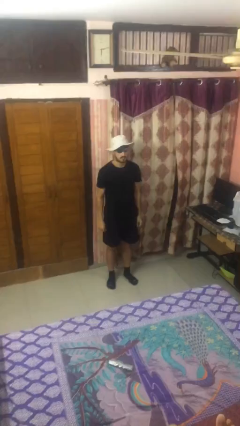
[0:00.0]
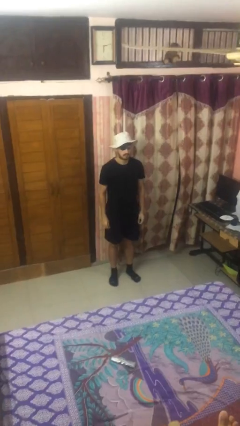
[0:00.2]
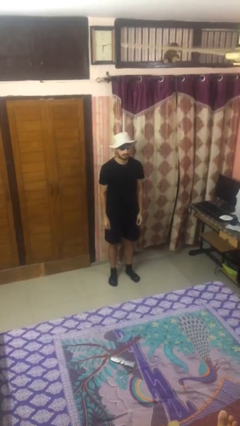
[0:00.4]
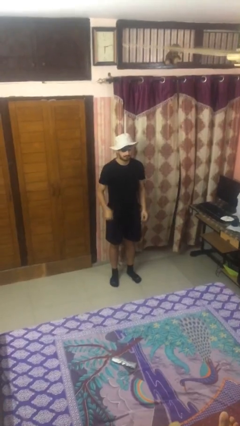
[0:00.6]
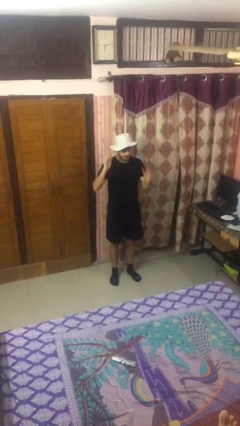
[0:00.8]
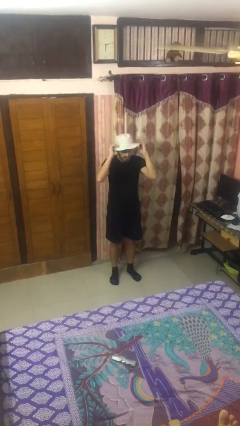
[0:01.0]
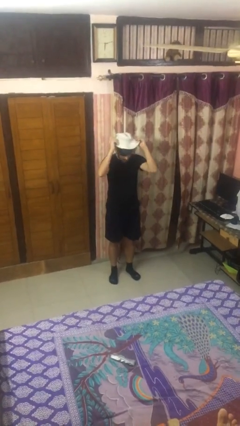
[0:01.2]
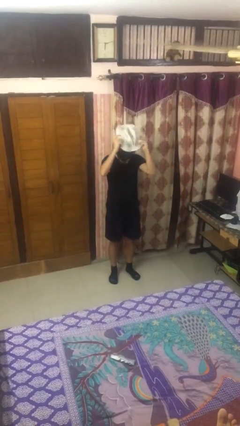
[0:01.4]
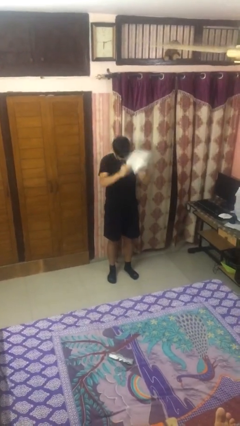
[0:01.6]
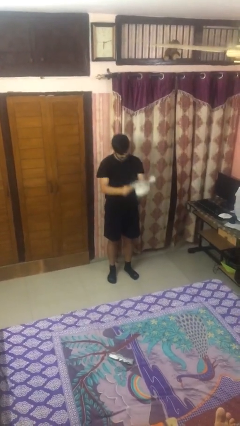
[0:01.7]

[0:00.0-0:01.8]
person takes off hat

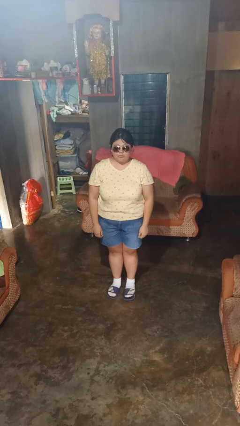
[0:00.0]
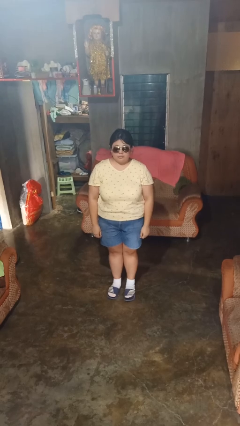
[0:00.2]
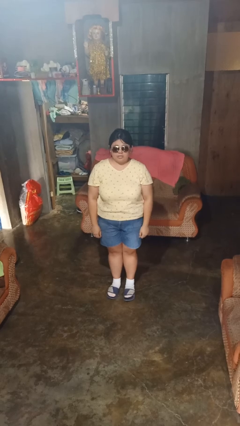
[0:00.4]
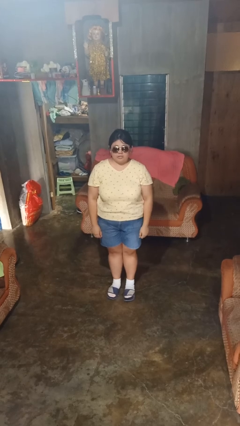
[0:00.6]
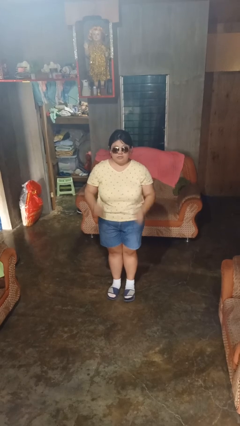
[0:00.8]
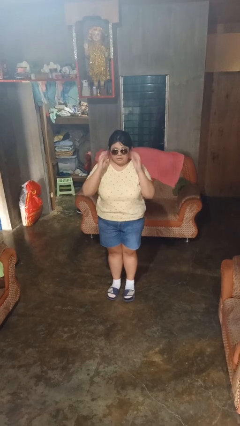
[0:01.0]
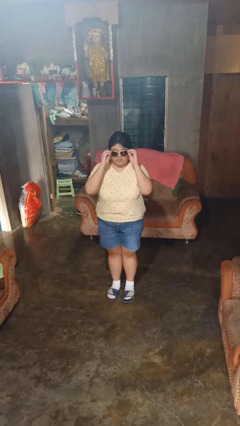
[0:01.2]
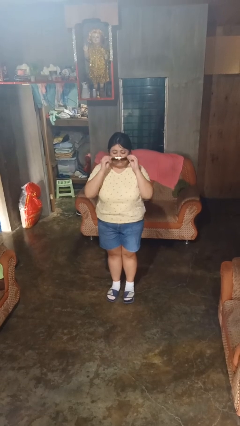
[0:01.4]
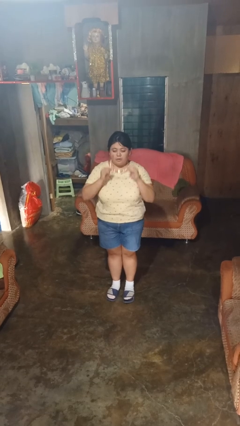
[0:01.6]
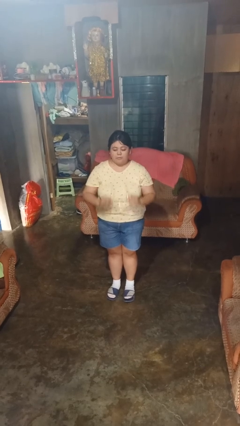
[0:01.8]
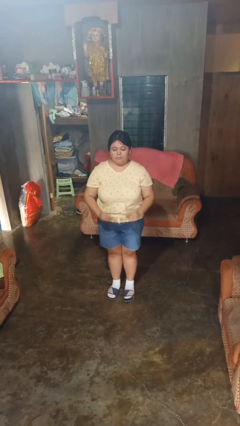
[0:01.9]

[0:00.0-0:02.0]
person takes off sunglasses

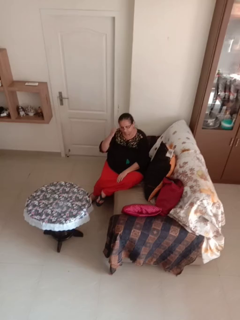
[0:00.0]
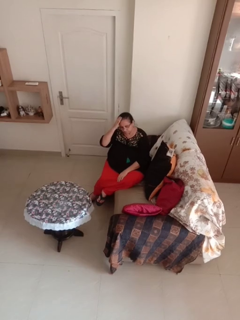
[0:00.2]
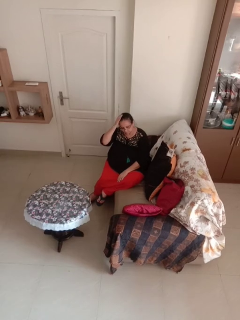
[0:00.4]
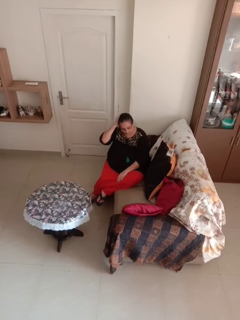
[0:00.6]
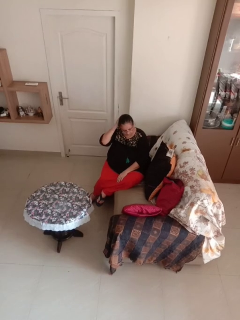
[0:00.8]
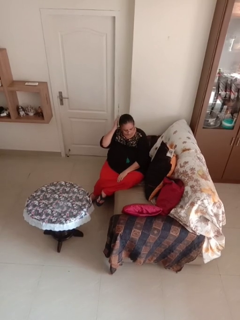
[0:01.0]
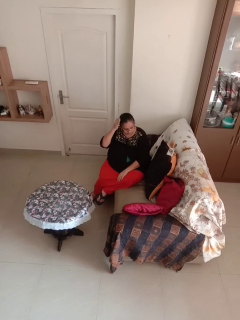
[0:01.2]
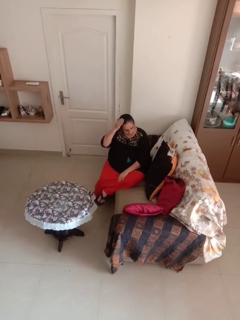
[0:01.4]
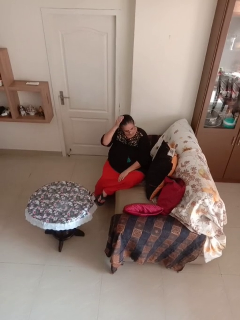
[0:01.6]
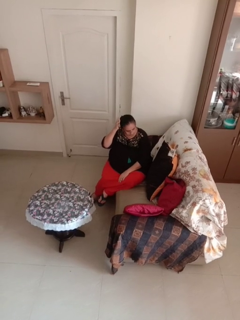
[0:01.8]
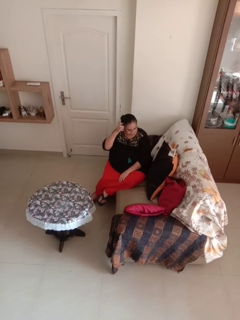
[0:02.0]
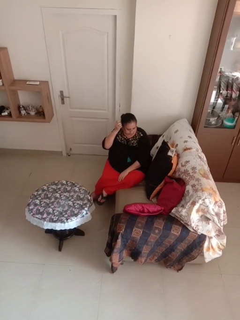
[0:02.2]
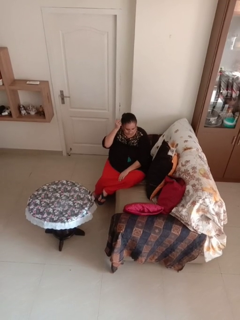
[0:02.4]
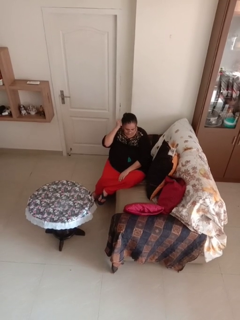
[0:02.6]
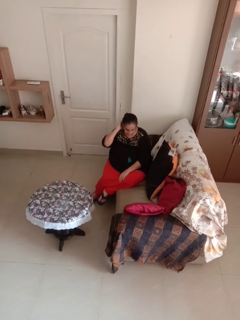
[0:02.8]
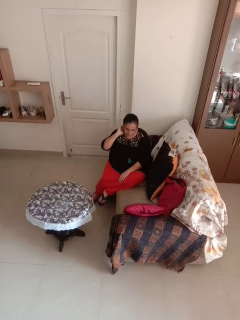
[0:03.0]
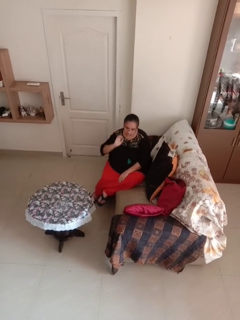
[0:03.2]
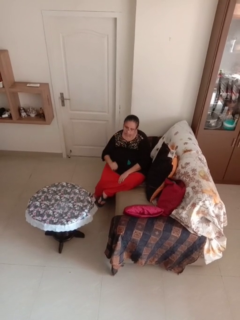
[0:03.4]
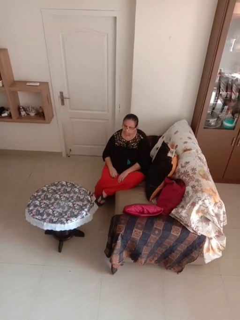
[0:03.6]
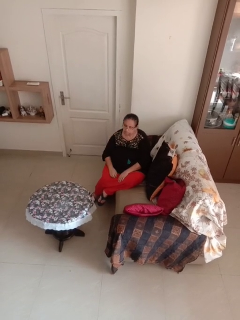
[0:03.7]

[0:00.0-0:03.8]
person strokes hair

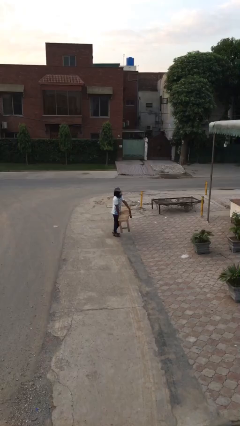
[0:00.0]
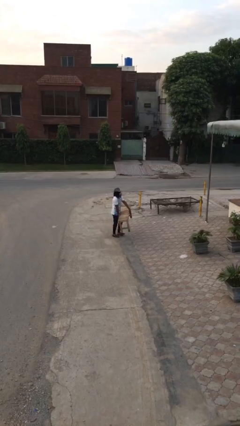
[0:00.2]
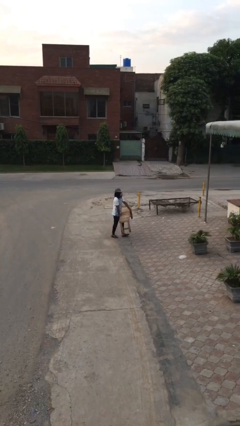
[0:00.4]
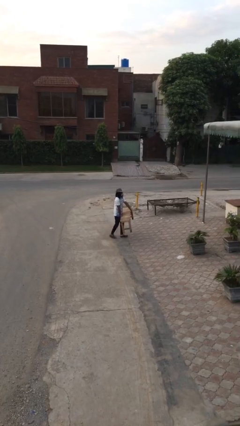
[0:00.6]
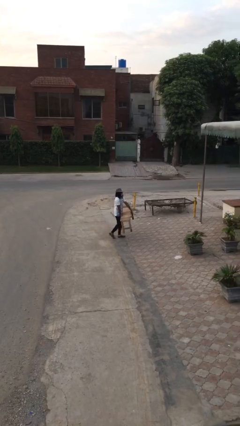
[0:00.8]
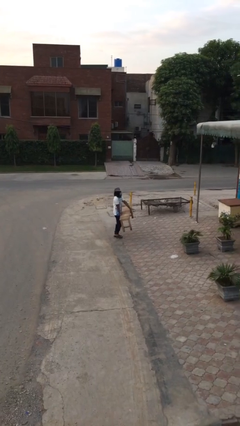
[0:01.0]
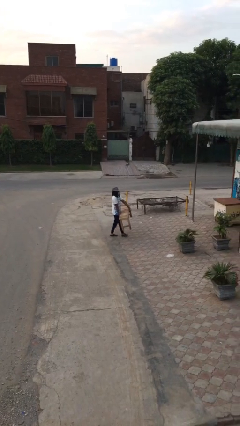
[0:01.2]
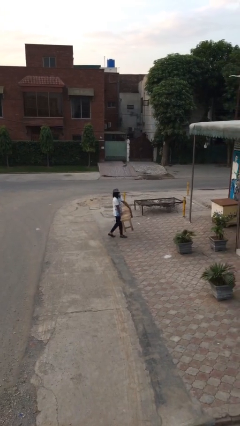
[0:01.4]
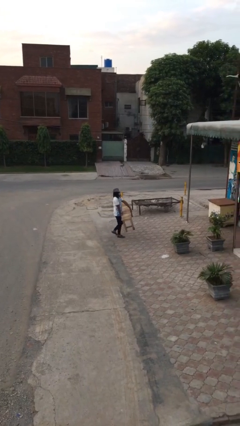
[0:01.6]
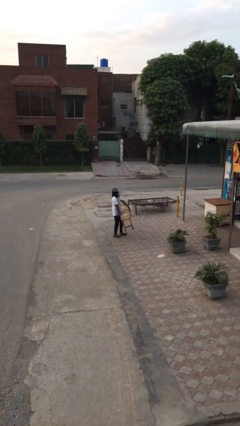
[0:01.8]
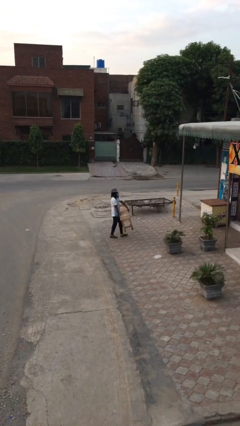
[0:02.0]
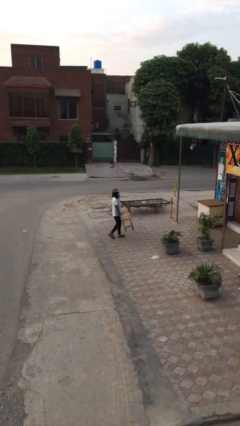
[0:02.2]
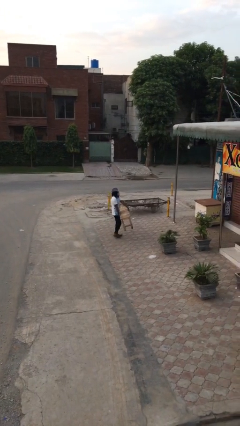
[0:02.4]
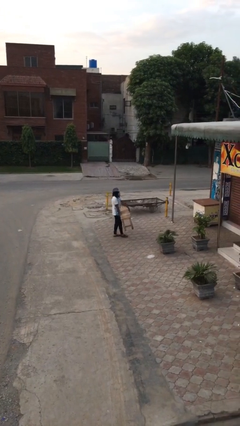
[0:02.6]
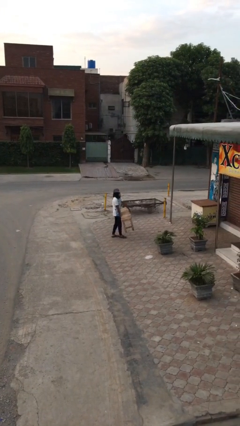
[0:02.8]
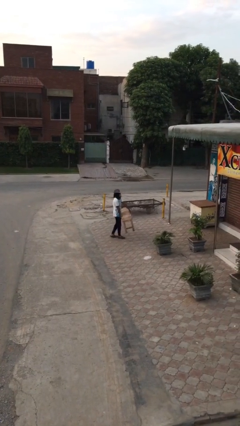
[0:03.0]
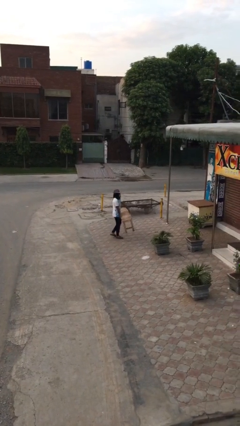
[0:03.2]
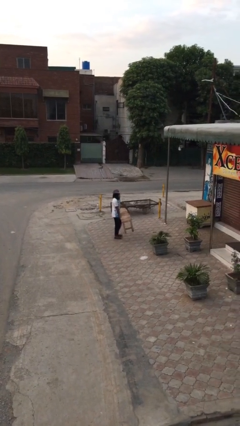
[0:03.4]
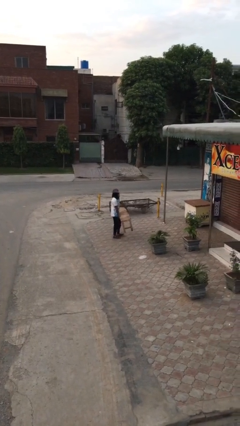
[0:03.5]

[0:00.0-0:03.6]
person carries heavy object

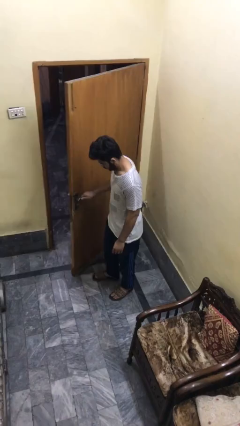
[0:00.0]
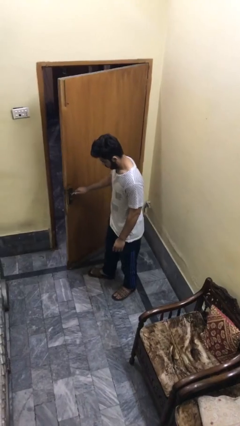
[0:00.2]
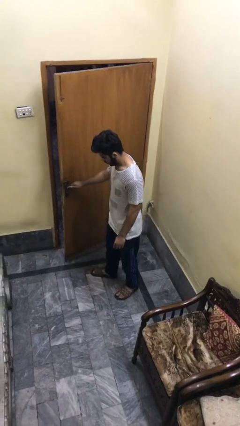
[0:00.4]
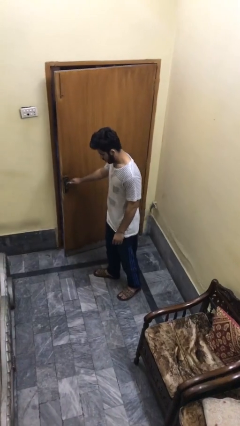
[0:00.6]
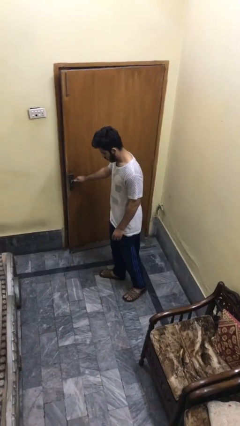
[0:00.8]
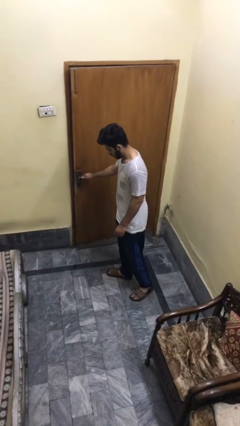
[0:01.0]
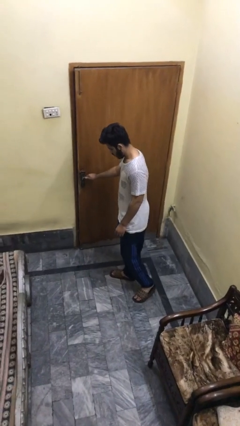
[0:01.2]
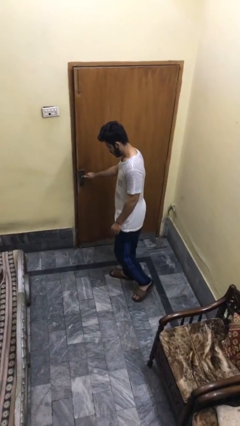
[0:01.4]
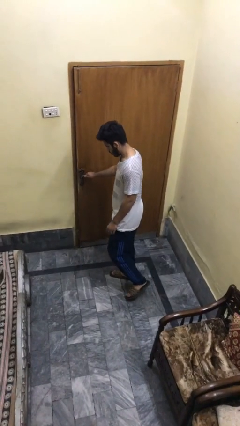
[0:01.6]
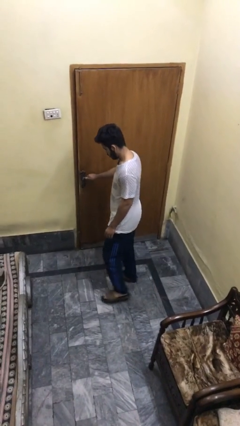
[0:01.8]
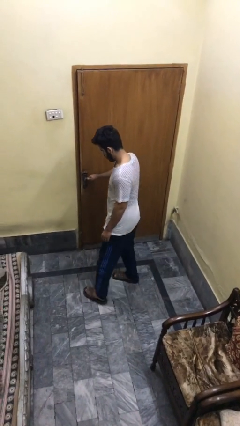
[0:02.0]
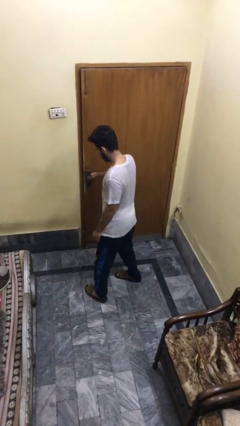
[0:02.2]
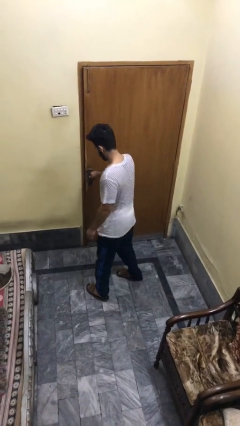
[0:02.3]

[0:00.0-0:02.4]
person closes facility door

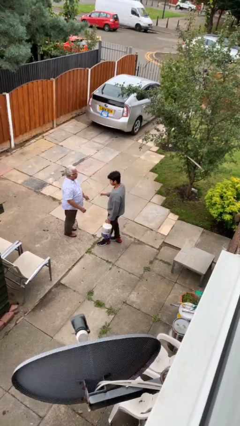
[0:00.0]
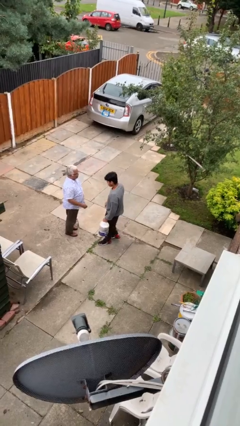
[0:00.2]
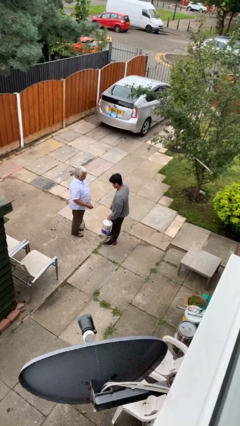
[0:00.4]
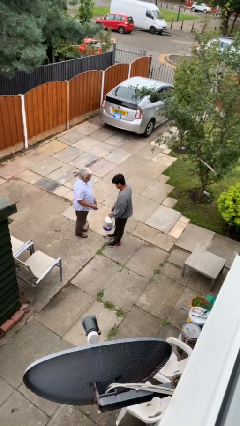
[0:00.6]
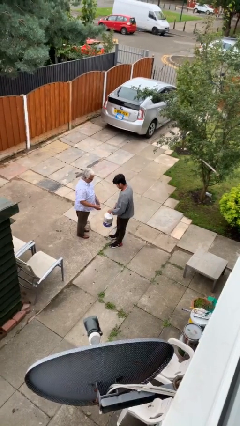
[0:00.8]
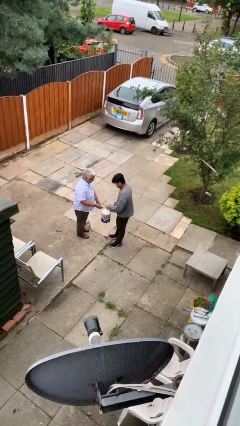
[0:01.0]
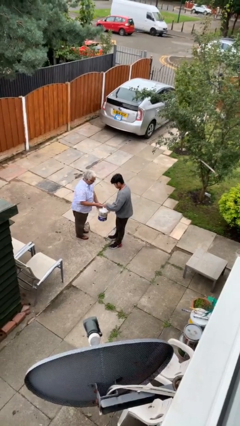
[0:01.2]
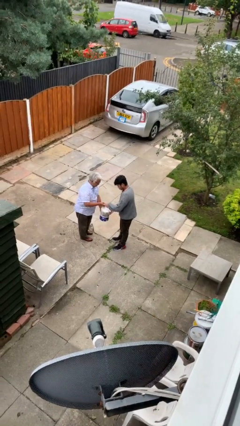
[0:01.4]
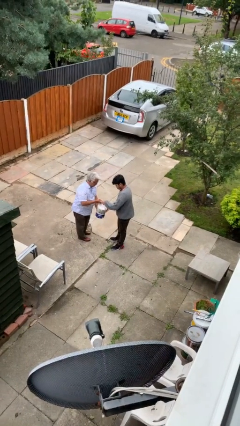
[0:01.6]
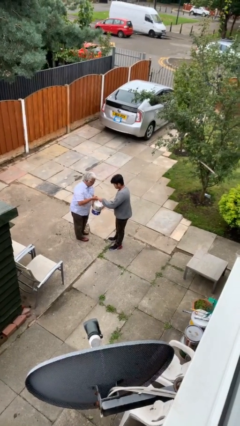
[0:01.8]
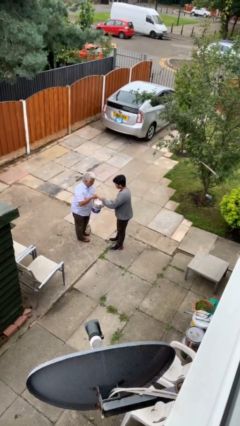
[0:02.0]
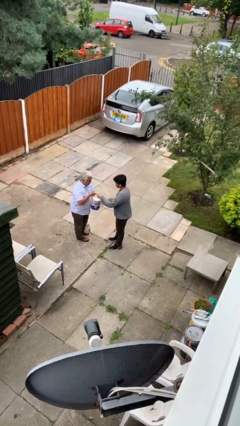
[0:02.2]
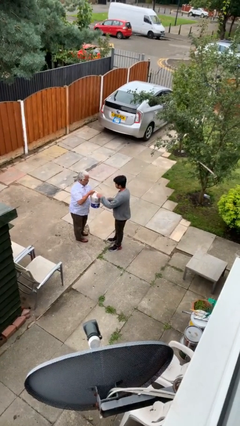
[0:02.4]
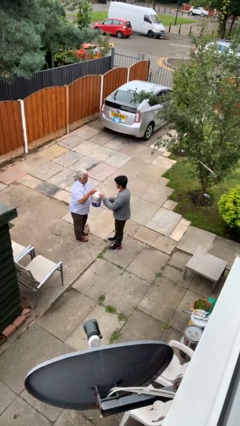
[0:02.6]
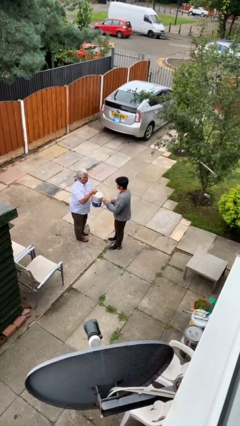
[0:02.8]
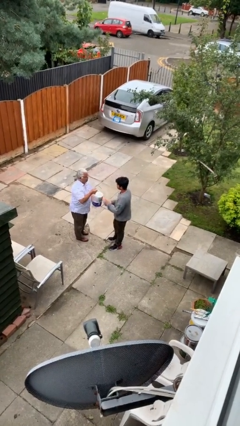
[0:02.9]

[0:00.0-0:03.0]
person transfers object to person

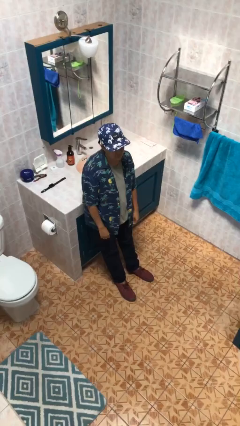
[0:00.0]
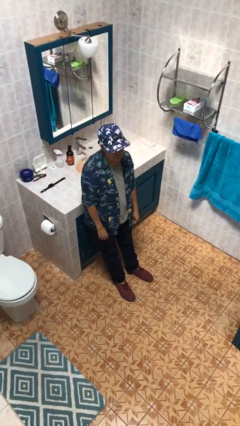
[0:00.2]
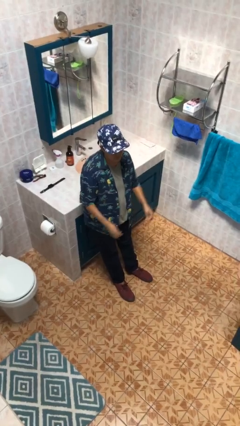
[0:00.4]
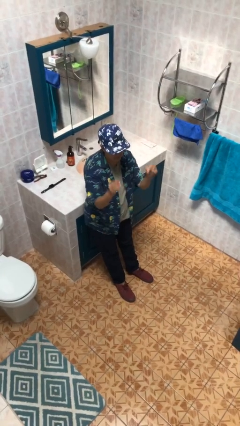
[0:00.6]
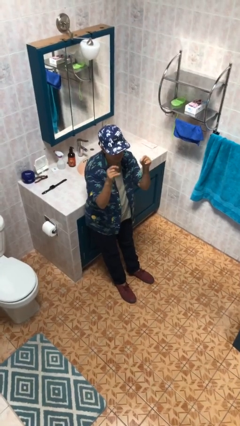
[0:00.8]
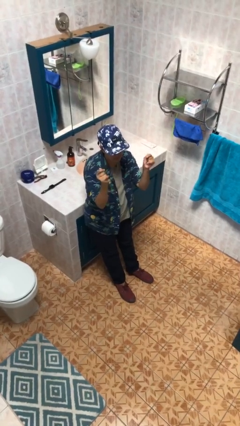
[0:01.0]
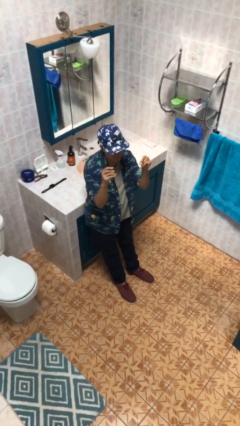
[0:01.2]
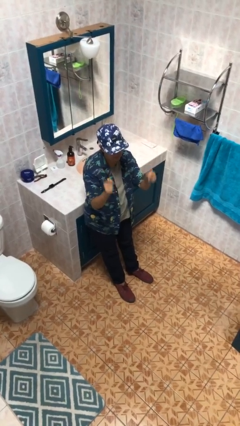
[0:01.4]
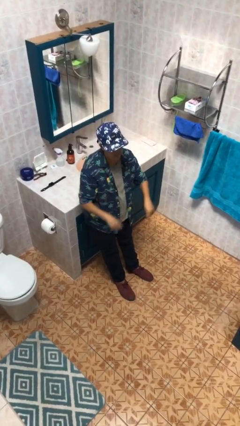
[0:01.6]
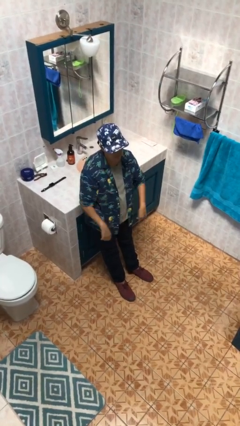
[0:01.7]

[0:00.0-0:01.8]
person snaps fingers
